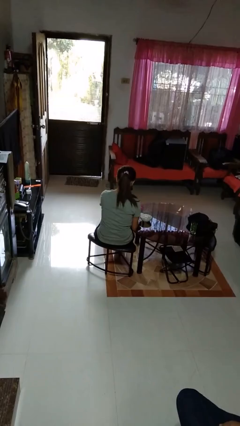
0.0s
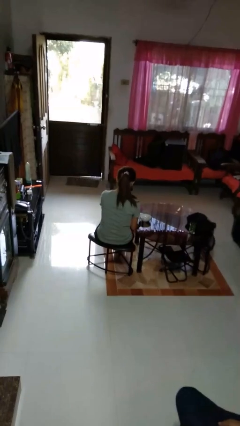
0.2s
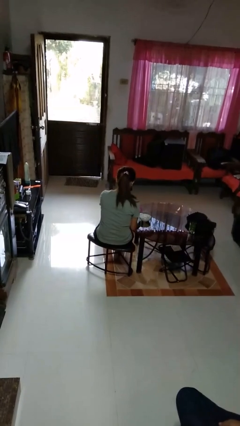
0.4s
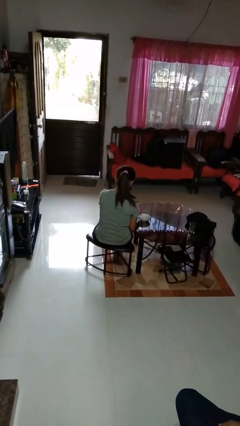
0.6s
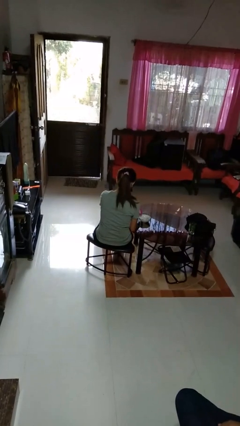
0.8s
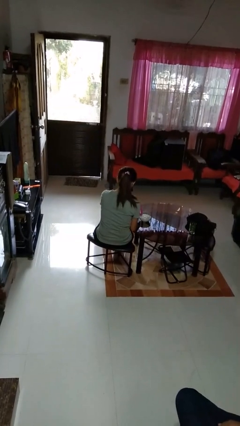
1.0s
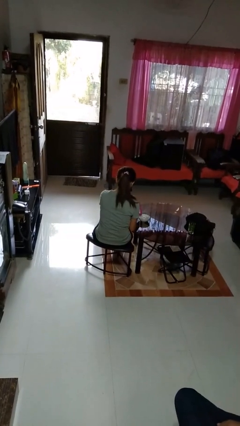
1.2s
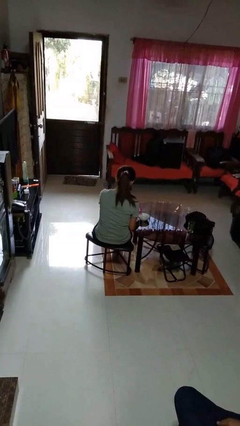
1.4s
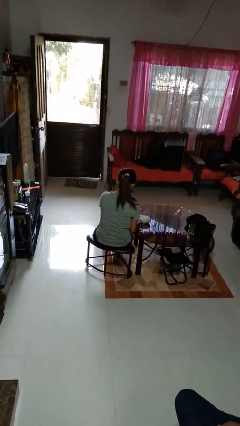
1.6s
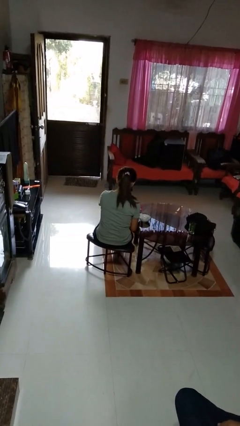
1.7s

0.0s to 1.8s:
person pours into bowl

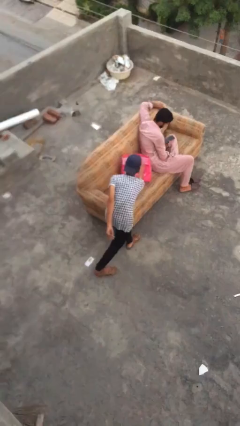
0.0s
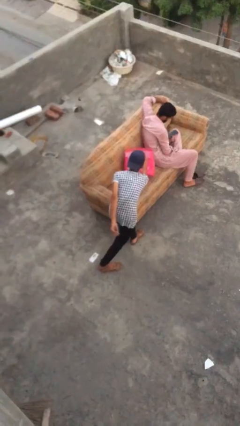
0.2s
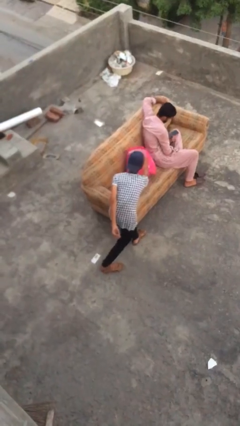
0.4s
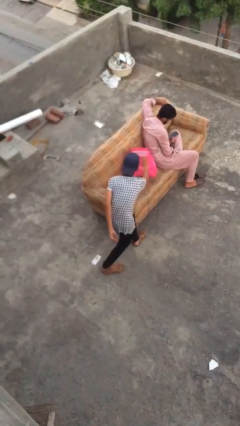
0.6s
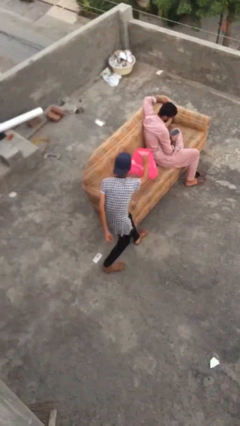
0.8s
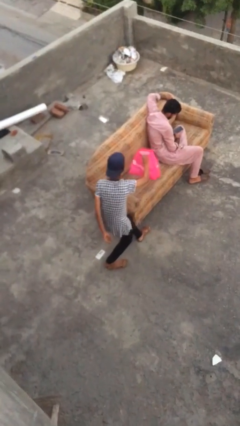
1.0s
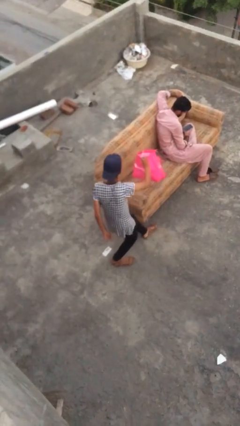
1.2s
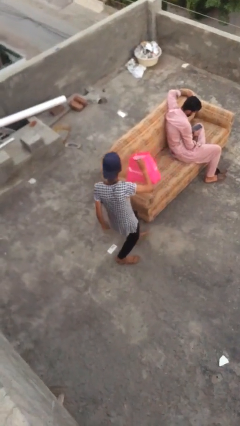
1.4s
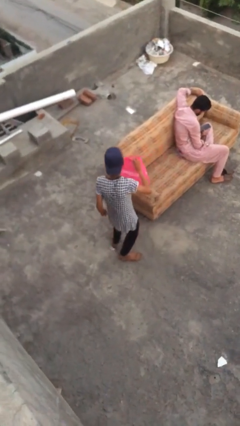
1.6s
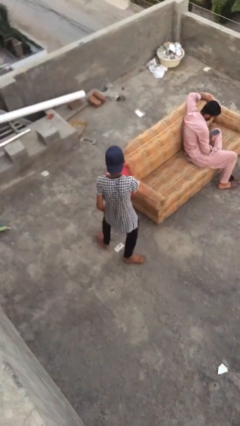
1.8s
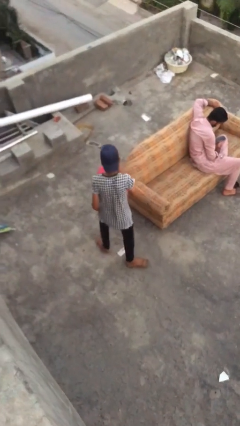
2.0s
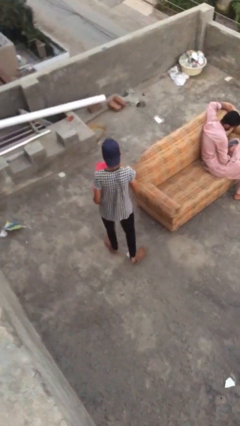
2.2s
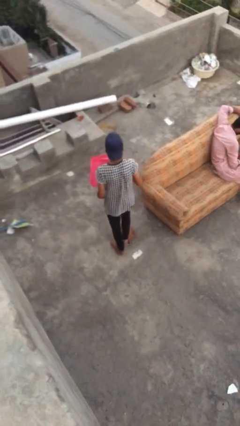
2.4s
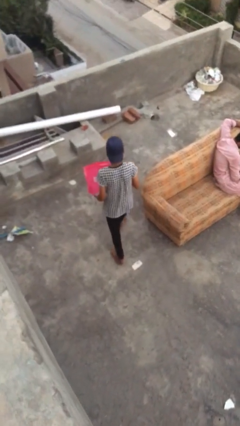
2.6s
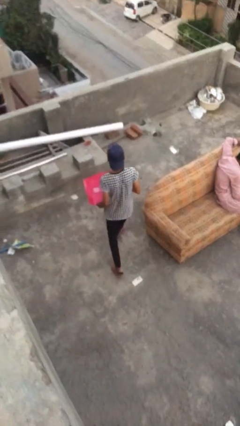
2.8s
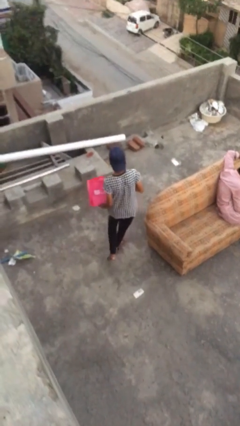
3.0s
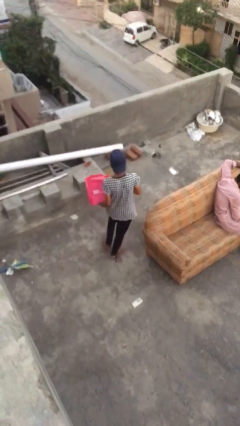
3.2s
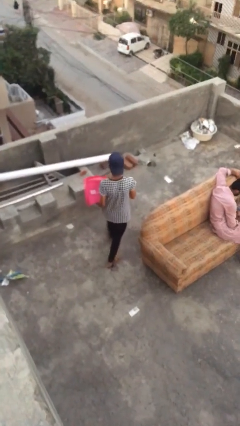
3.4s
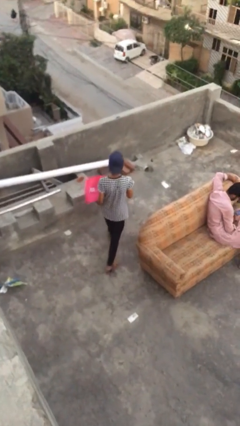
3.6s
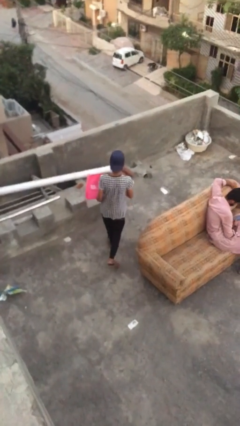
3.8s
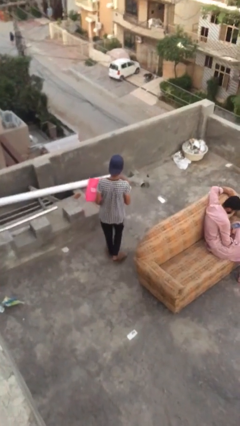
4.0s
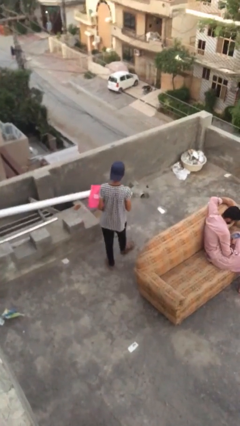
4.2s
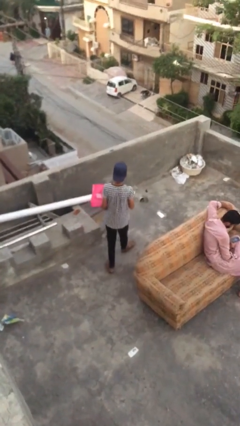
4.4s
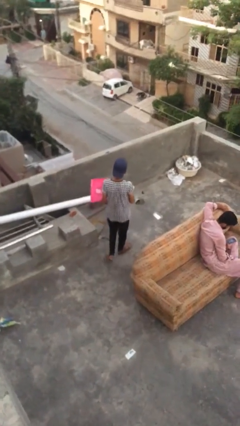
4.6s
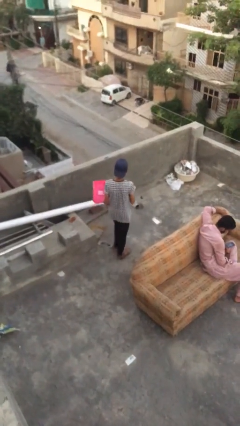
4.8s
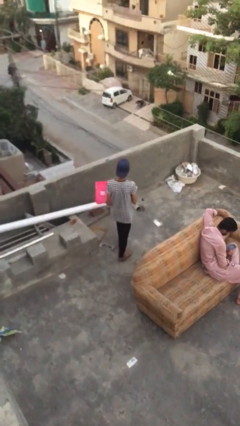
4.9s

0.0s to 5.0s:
person steals object from person

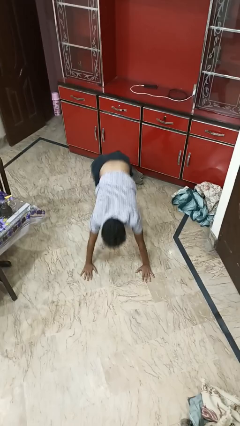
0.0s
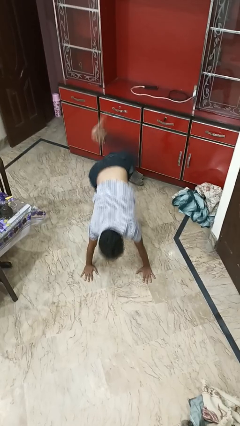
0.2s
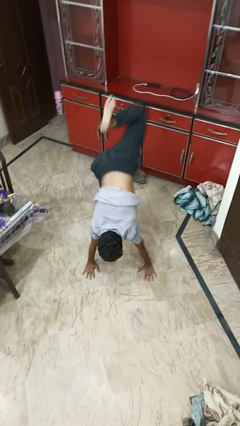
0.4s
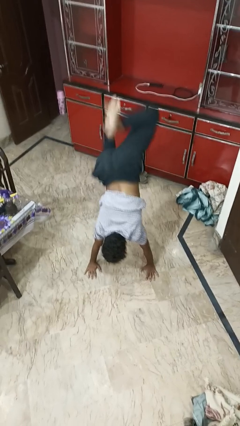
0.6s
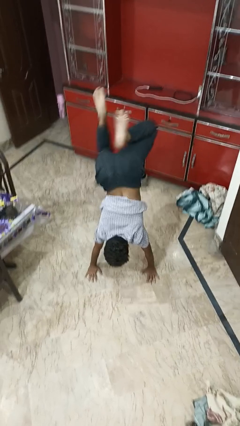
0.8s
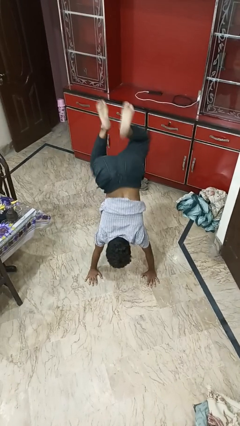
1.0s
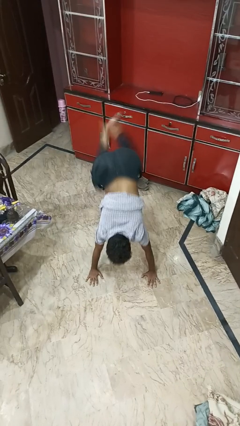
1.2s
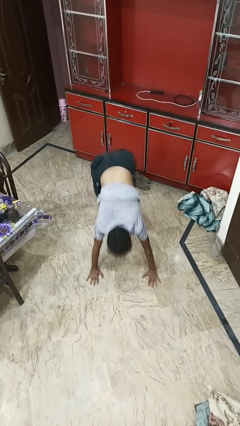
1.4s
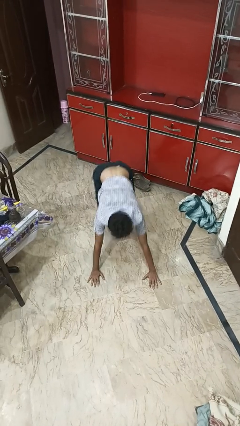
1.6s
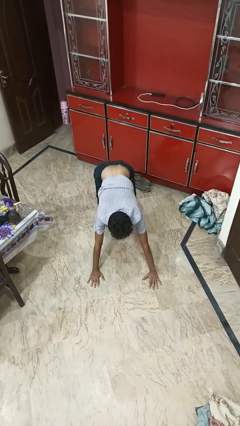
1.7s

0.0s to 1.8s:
person handstand

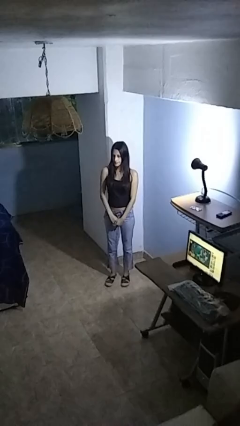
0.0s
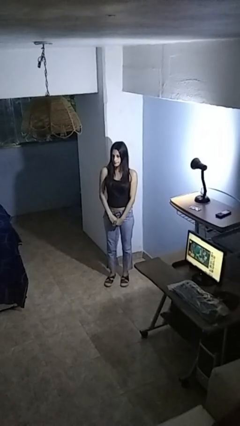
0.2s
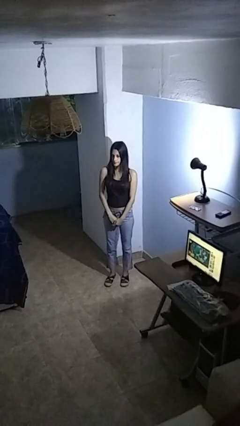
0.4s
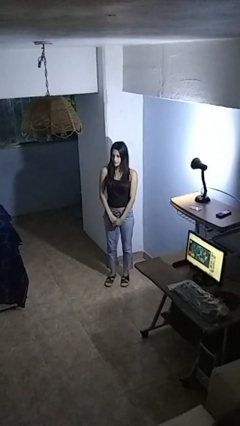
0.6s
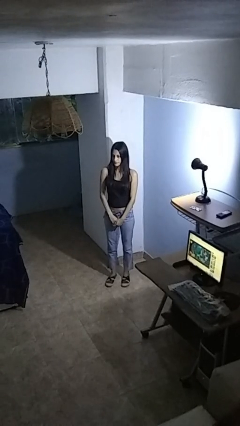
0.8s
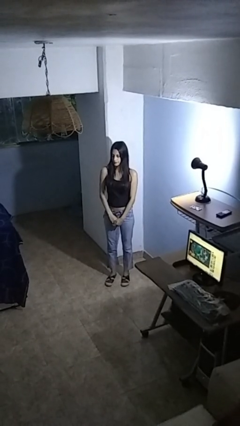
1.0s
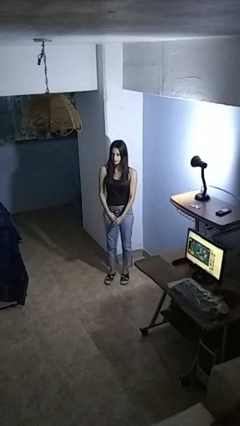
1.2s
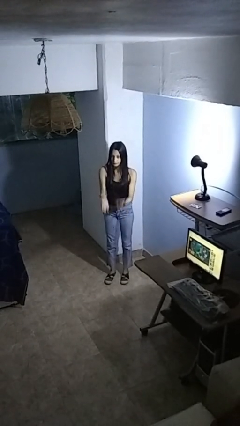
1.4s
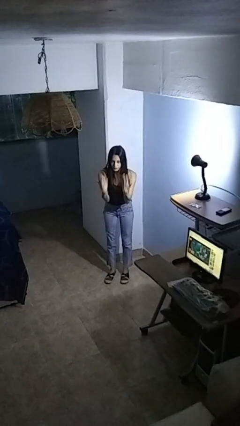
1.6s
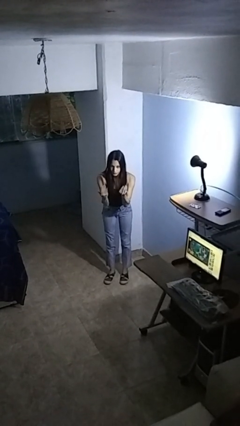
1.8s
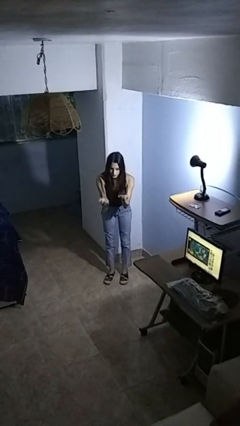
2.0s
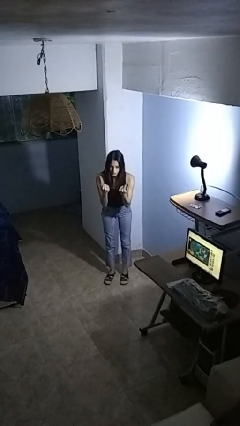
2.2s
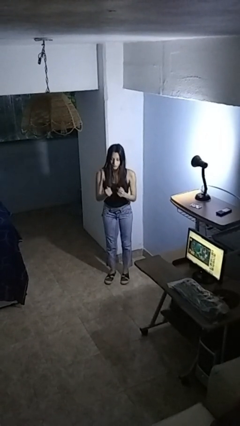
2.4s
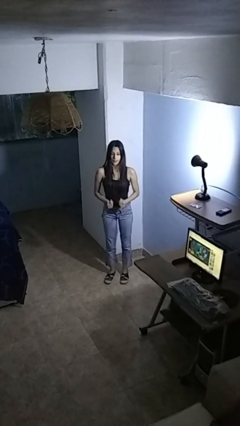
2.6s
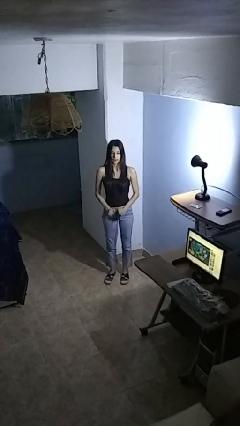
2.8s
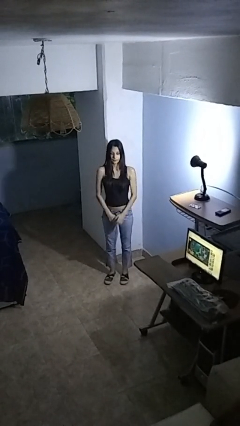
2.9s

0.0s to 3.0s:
person gestures come here

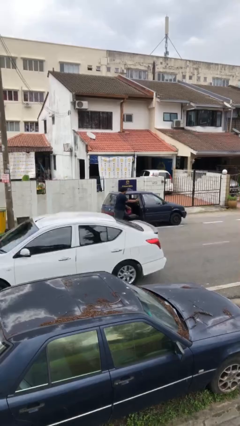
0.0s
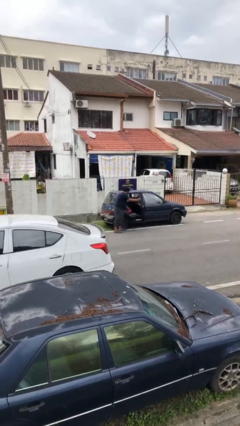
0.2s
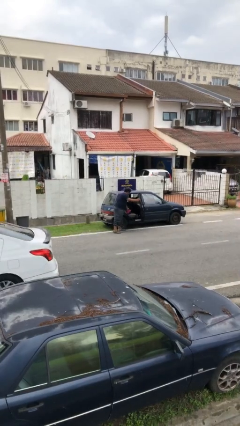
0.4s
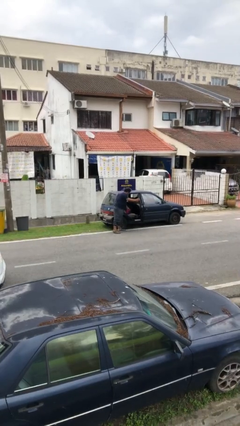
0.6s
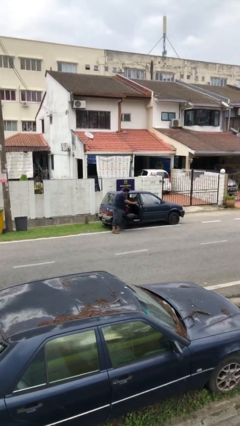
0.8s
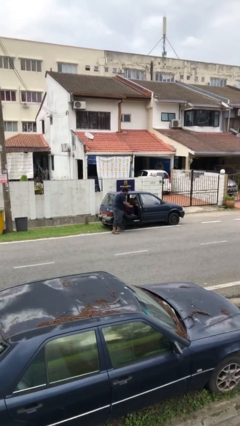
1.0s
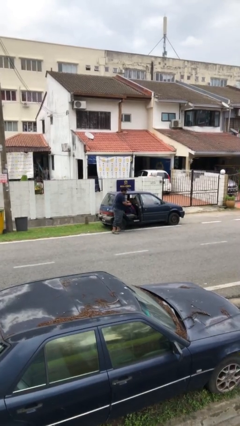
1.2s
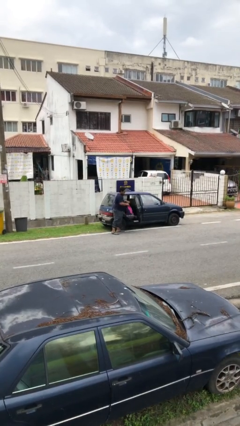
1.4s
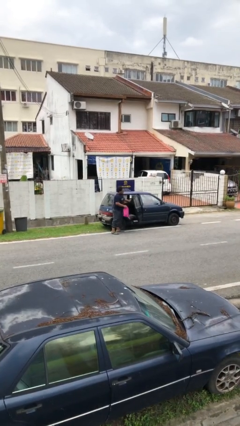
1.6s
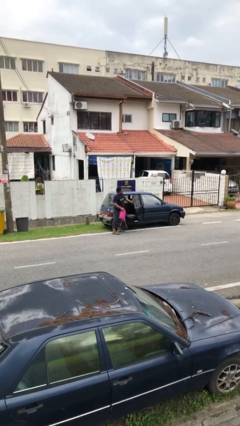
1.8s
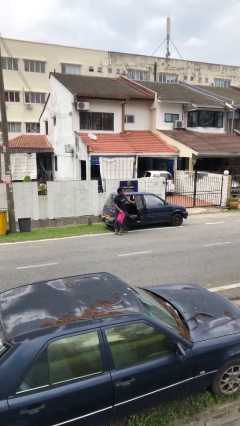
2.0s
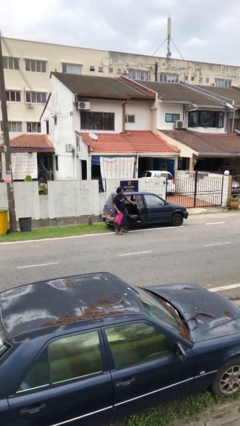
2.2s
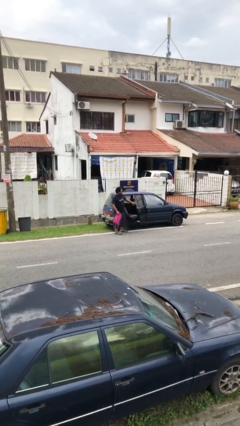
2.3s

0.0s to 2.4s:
person unloads car

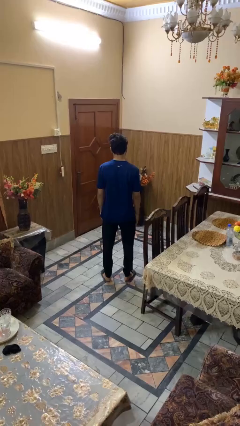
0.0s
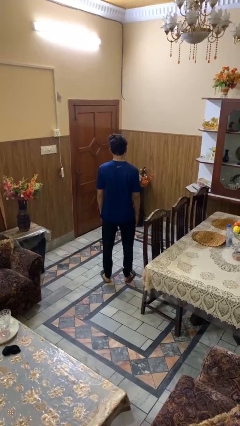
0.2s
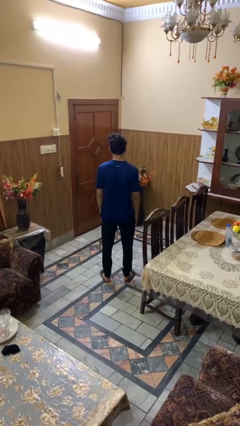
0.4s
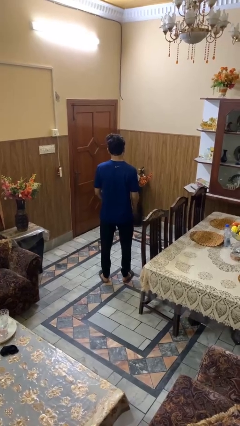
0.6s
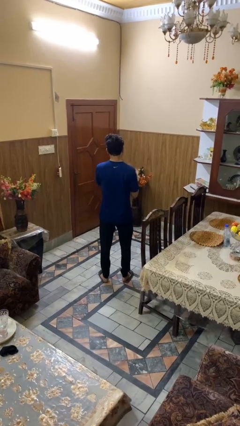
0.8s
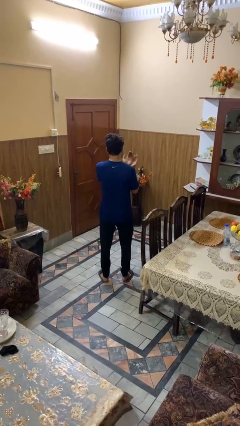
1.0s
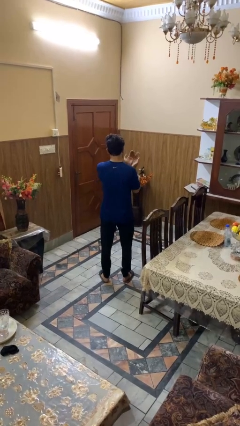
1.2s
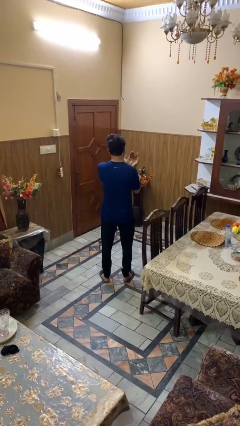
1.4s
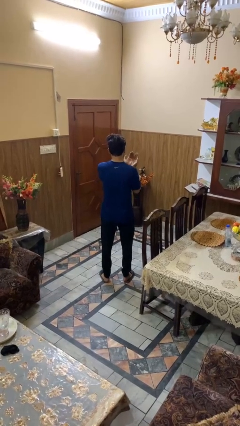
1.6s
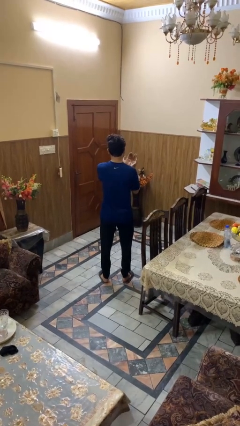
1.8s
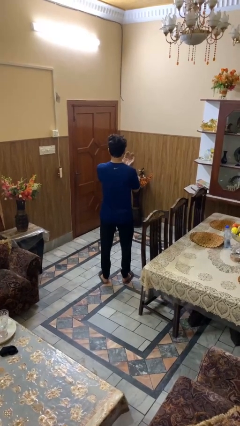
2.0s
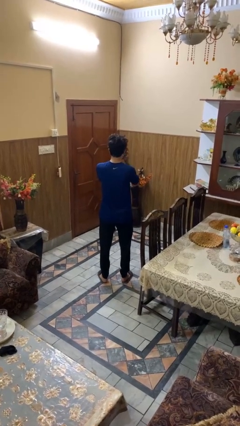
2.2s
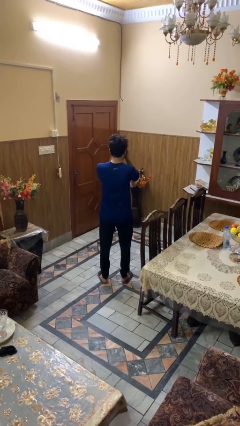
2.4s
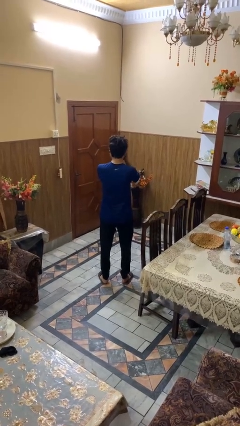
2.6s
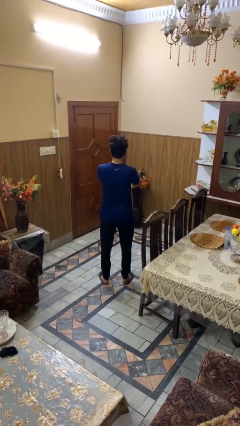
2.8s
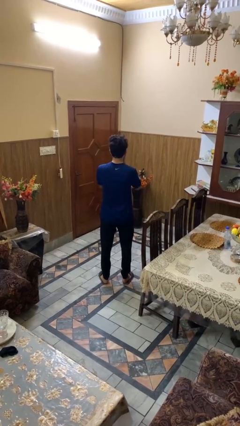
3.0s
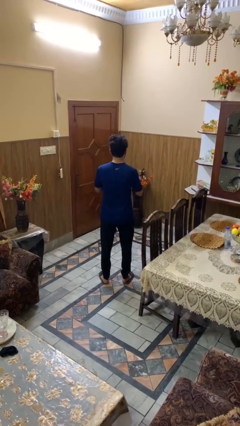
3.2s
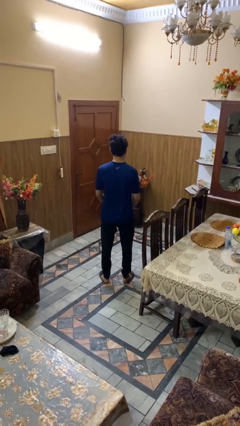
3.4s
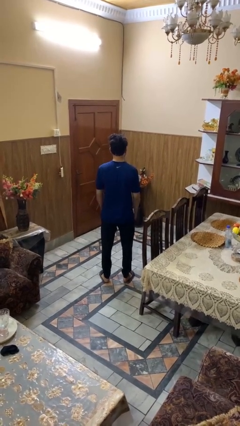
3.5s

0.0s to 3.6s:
person prays
